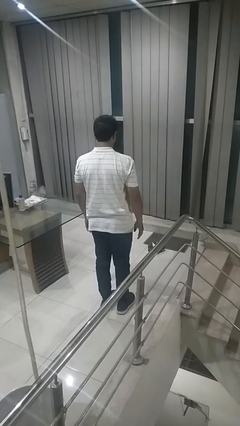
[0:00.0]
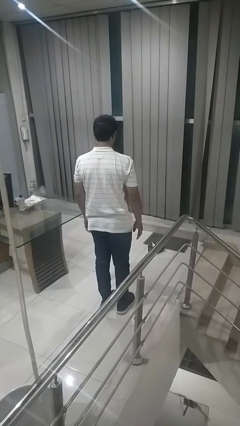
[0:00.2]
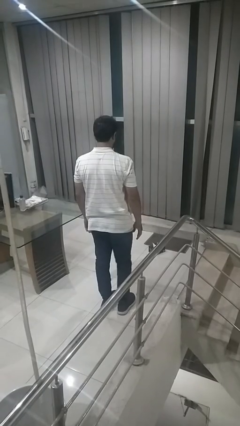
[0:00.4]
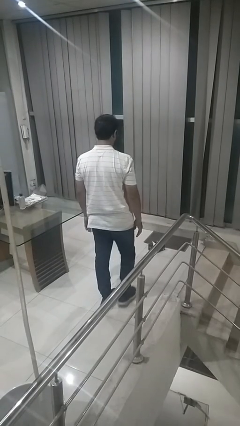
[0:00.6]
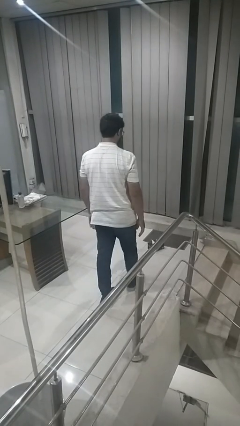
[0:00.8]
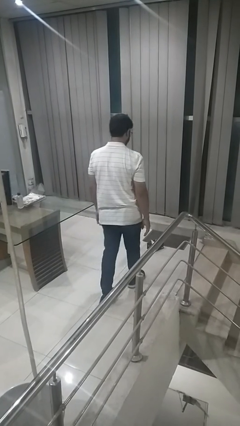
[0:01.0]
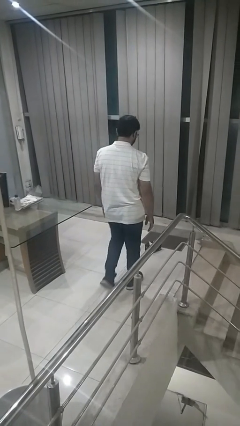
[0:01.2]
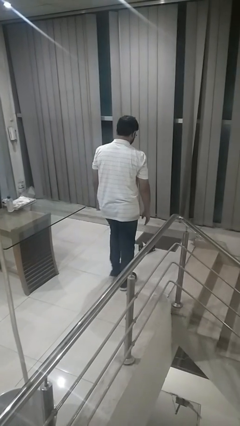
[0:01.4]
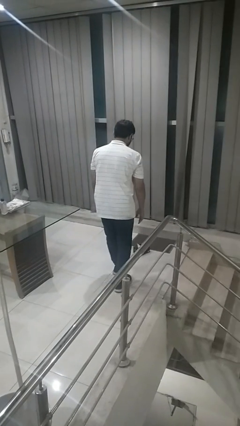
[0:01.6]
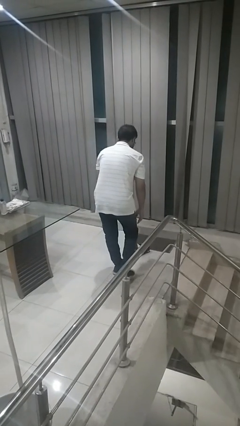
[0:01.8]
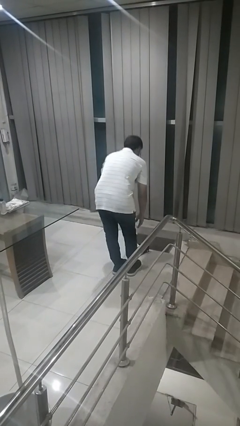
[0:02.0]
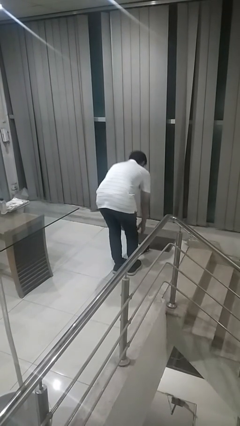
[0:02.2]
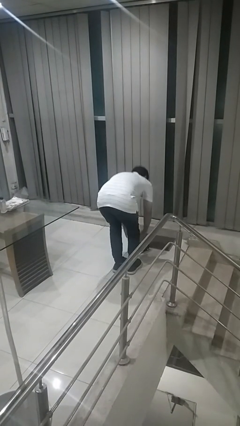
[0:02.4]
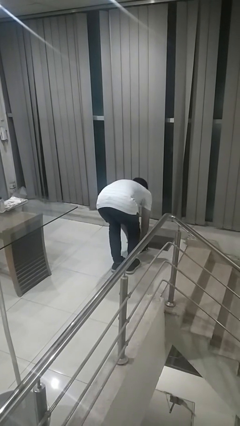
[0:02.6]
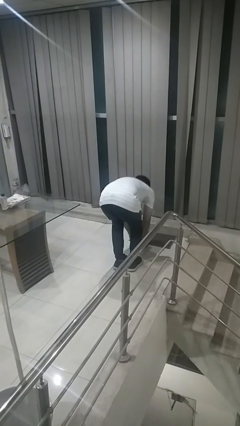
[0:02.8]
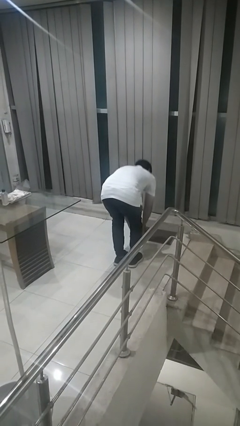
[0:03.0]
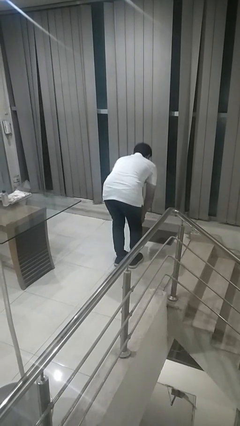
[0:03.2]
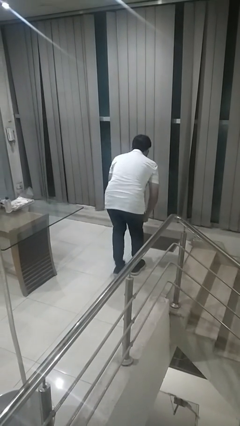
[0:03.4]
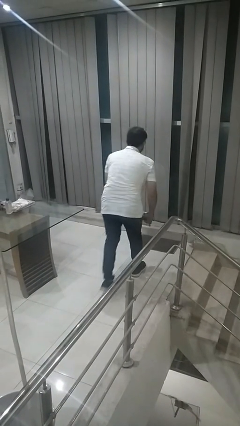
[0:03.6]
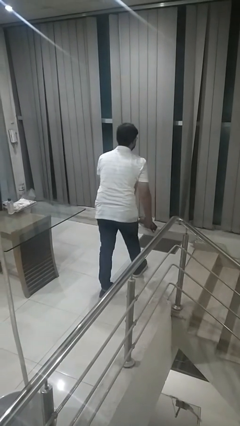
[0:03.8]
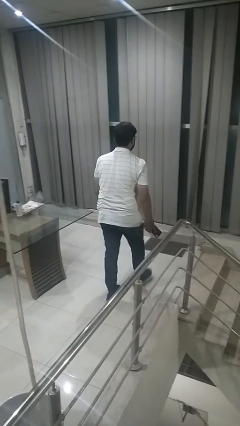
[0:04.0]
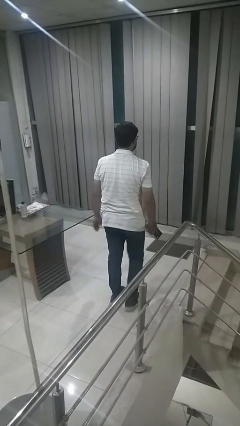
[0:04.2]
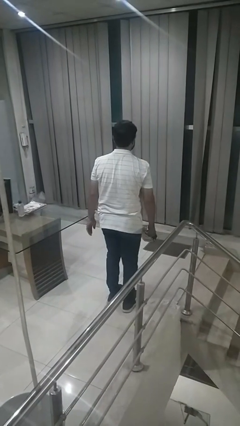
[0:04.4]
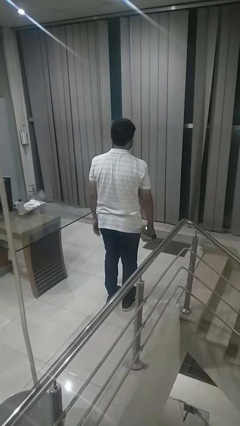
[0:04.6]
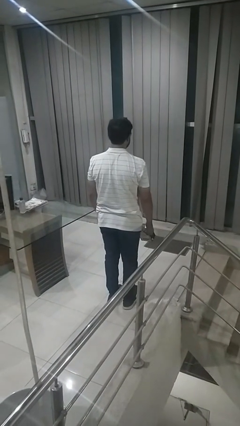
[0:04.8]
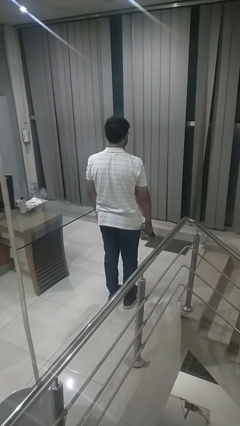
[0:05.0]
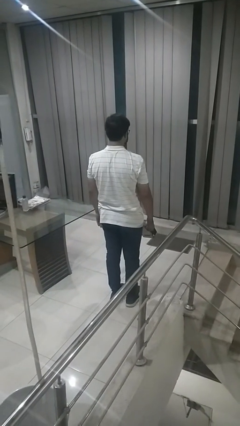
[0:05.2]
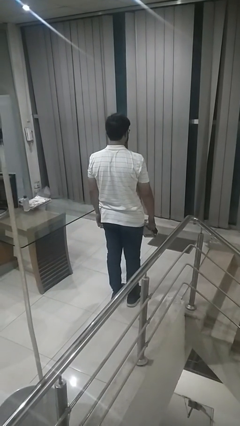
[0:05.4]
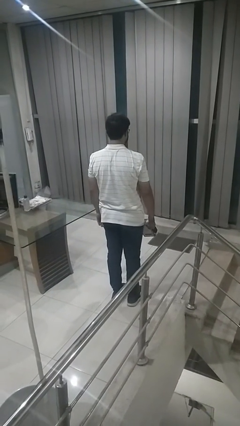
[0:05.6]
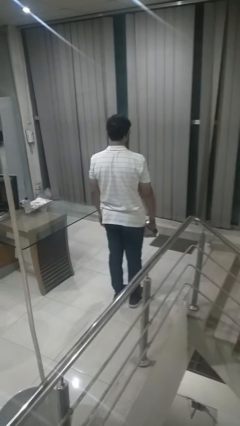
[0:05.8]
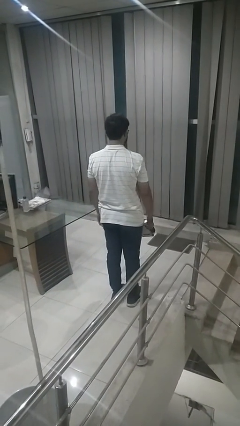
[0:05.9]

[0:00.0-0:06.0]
person picks up object from floor

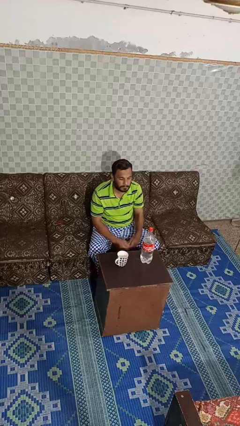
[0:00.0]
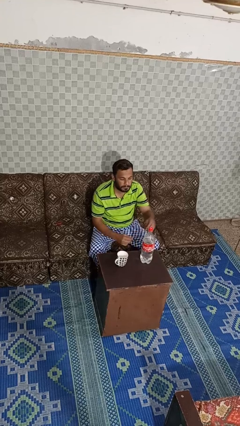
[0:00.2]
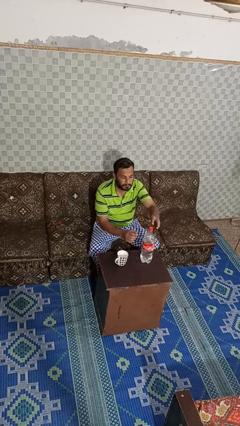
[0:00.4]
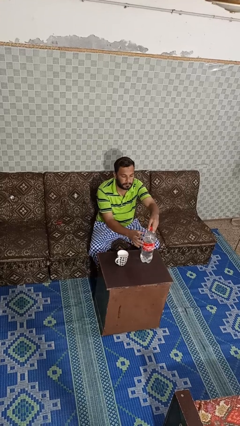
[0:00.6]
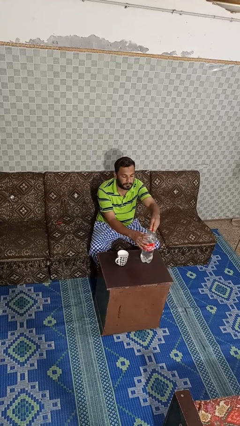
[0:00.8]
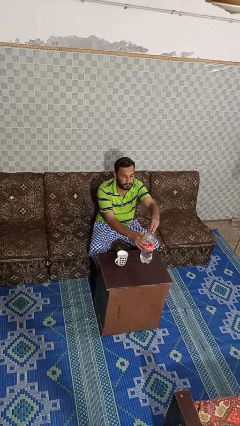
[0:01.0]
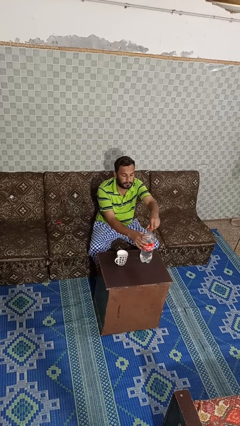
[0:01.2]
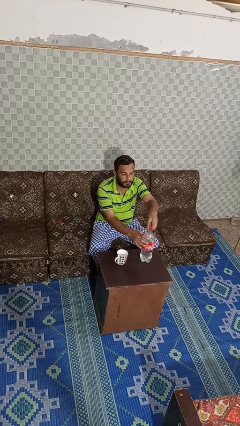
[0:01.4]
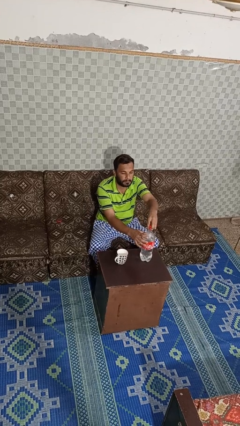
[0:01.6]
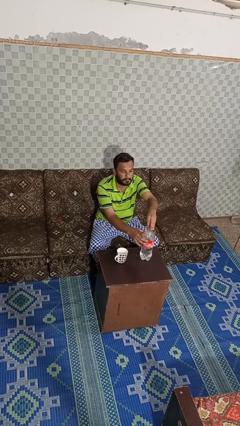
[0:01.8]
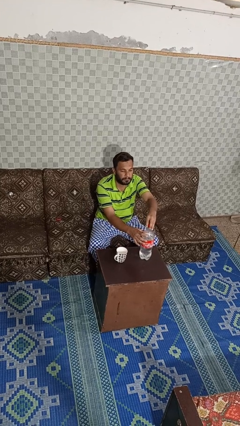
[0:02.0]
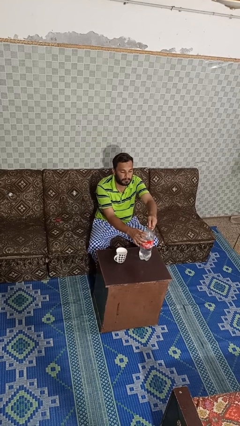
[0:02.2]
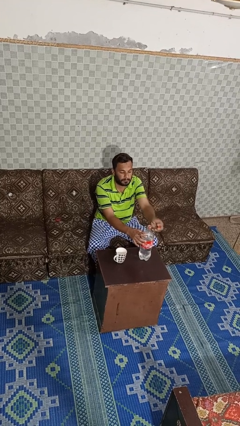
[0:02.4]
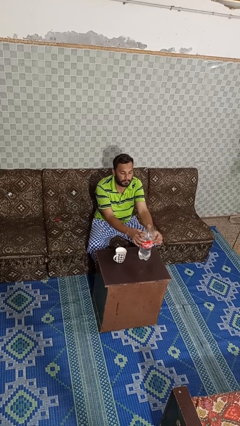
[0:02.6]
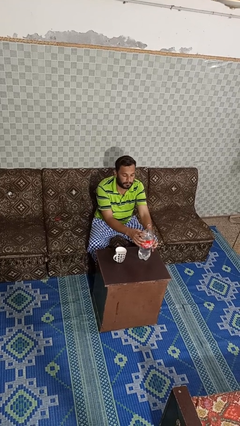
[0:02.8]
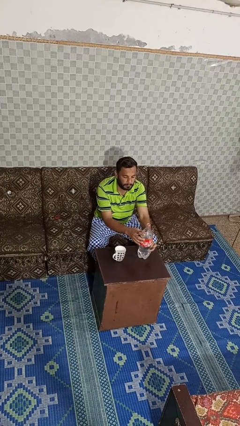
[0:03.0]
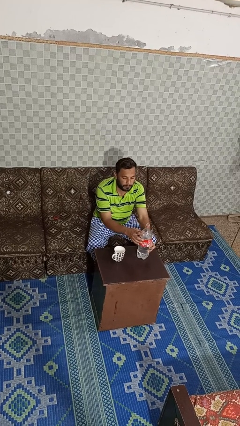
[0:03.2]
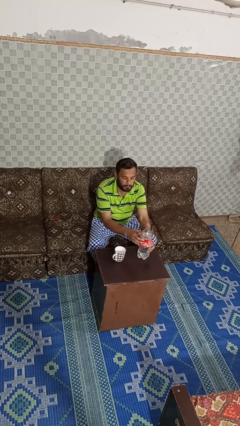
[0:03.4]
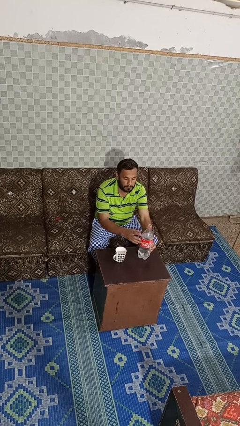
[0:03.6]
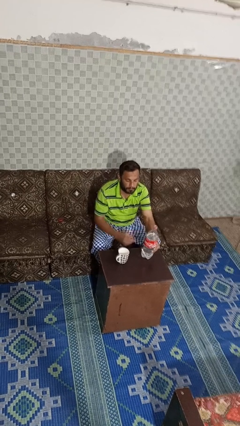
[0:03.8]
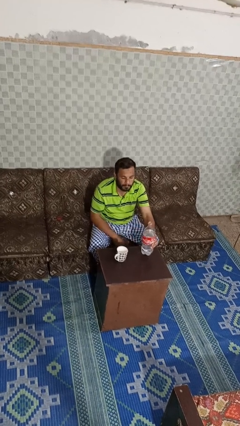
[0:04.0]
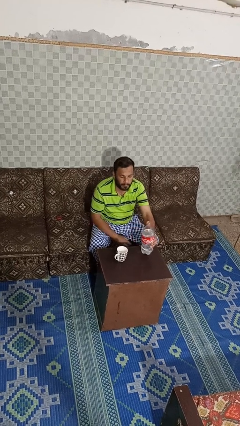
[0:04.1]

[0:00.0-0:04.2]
person unscrews lid from bottle

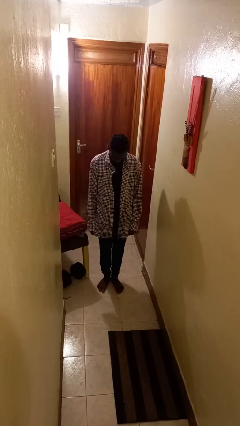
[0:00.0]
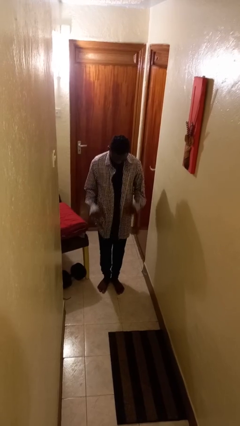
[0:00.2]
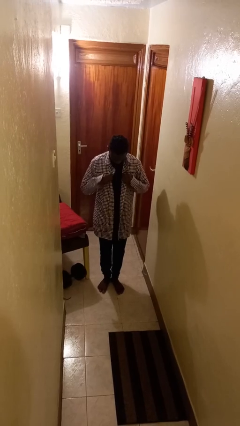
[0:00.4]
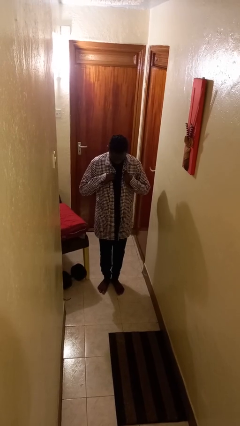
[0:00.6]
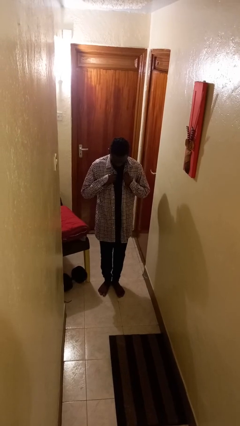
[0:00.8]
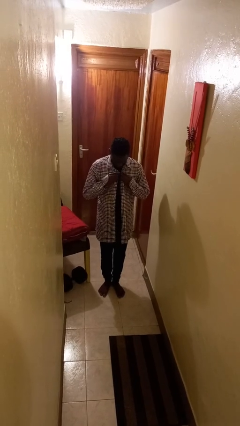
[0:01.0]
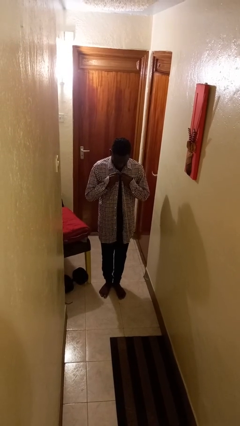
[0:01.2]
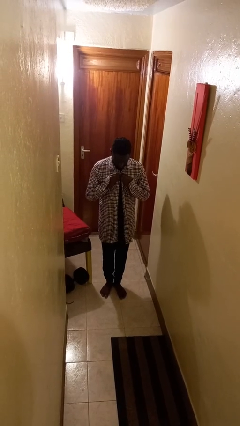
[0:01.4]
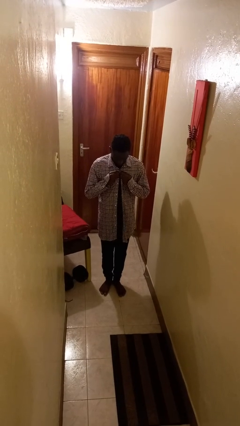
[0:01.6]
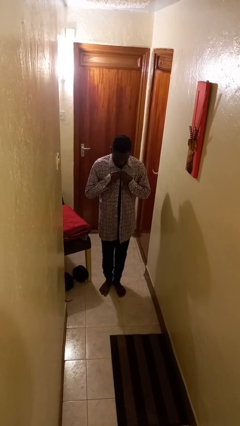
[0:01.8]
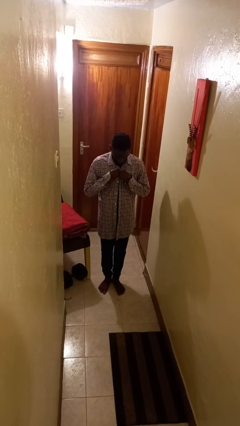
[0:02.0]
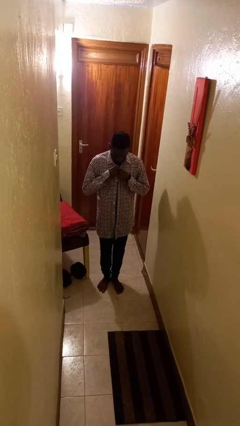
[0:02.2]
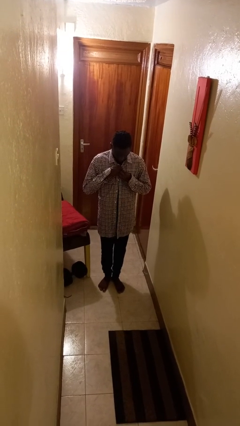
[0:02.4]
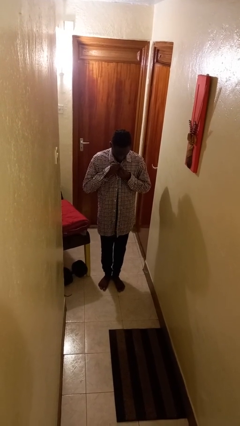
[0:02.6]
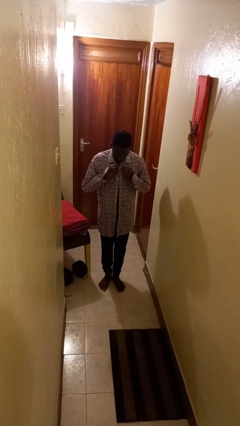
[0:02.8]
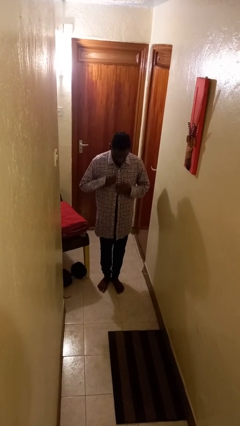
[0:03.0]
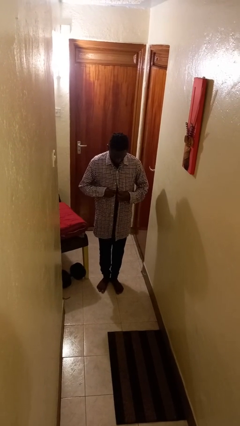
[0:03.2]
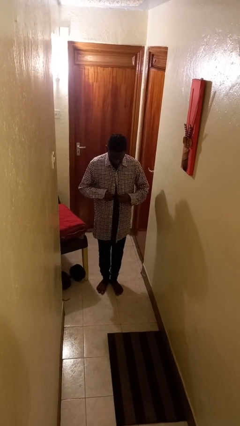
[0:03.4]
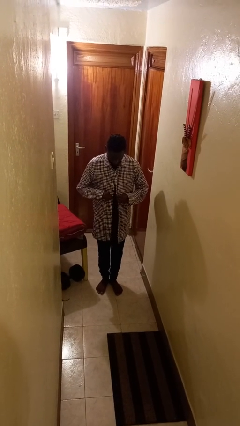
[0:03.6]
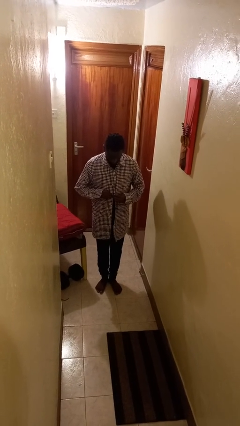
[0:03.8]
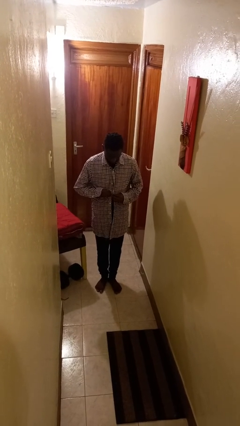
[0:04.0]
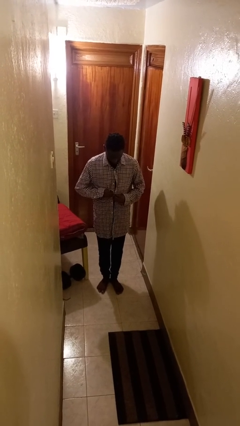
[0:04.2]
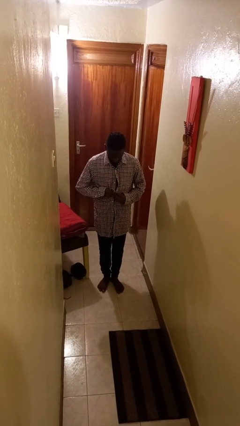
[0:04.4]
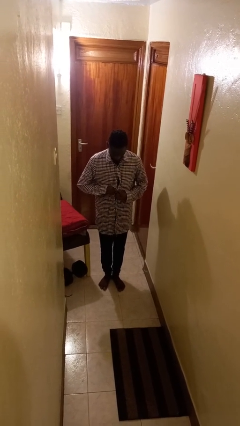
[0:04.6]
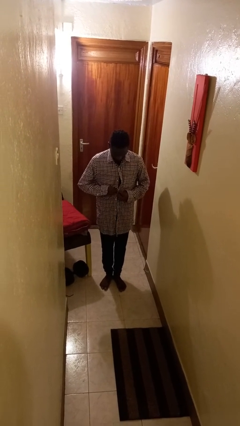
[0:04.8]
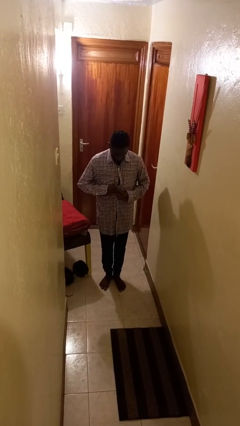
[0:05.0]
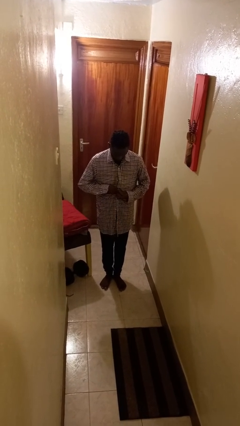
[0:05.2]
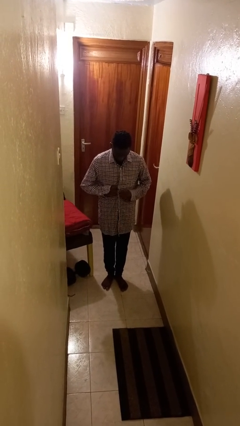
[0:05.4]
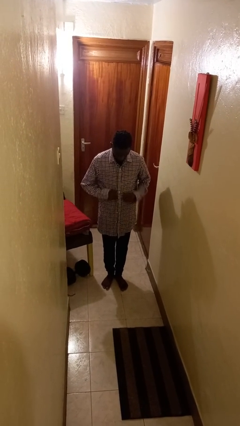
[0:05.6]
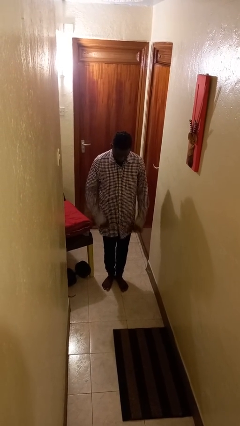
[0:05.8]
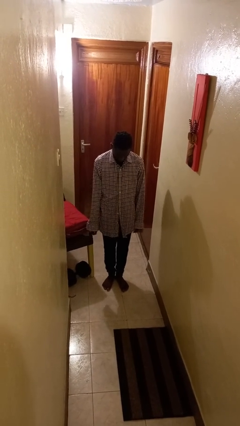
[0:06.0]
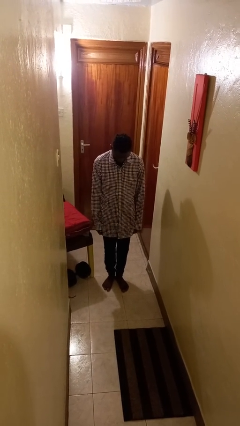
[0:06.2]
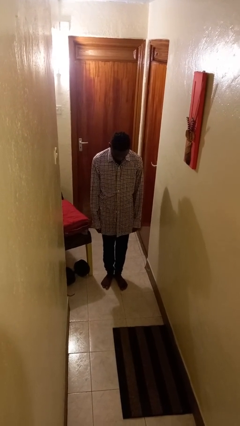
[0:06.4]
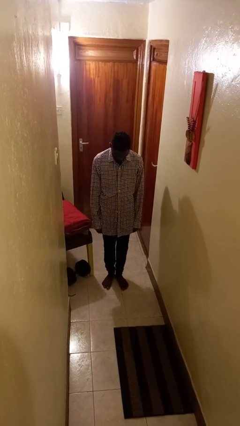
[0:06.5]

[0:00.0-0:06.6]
person buttons shirt

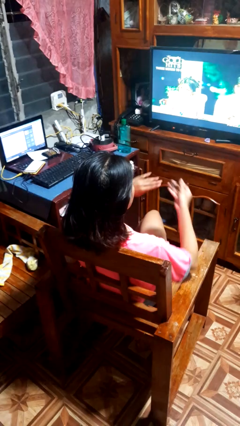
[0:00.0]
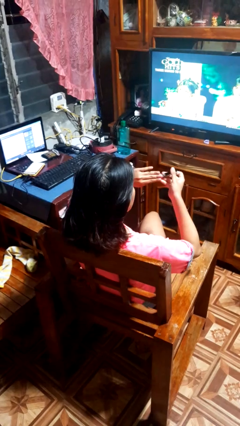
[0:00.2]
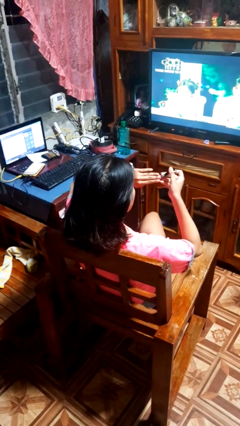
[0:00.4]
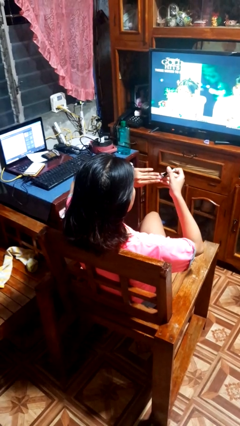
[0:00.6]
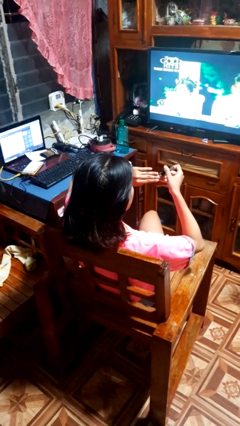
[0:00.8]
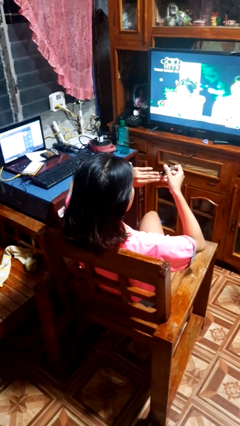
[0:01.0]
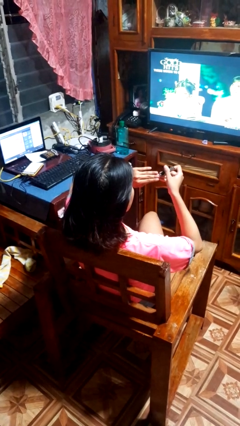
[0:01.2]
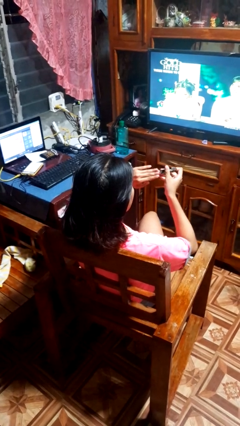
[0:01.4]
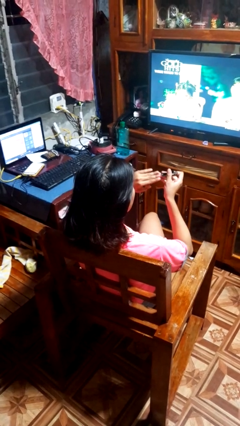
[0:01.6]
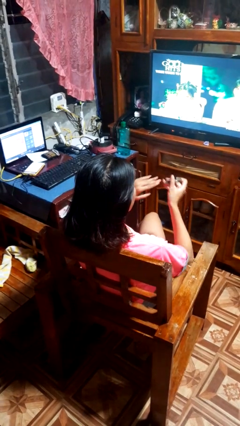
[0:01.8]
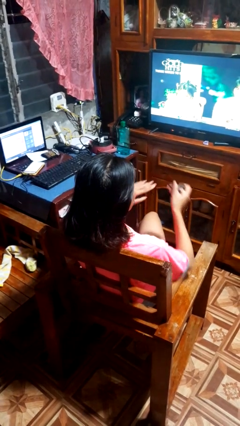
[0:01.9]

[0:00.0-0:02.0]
person clips fingernails
